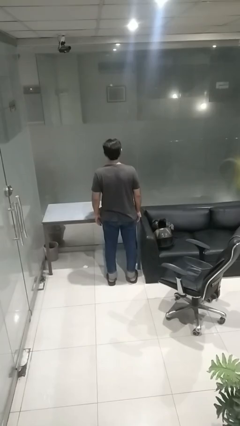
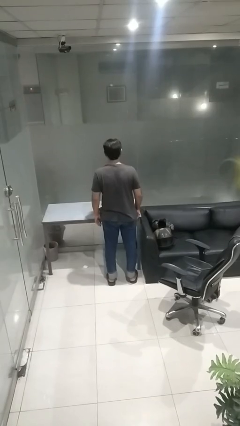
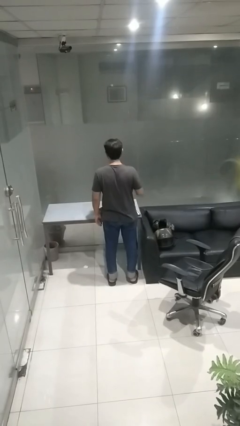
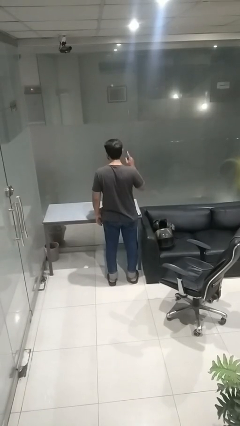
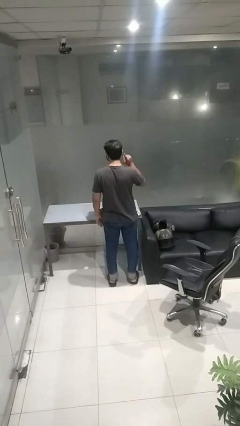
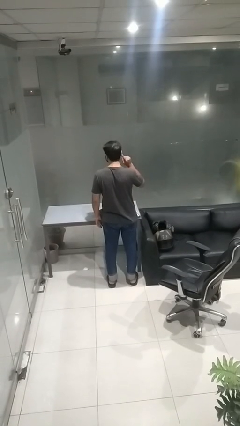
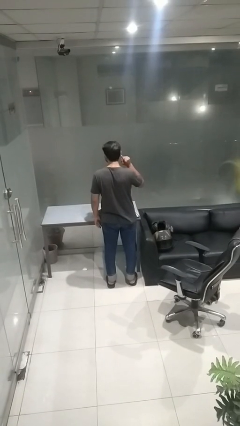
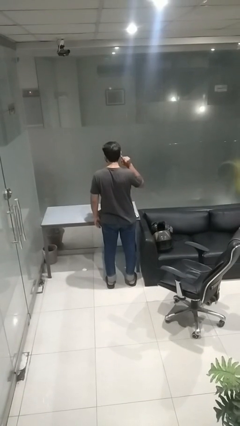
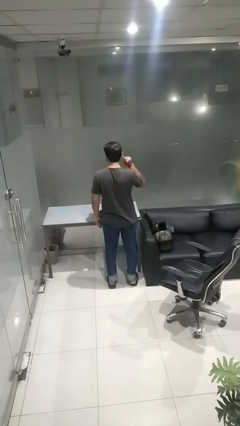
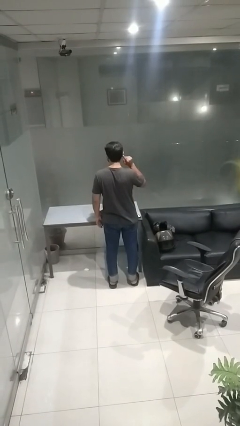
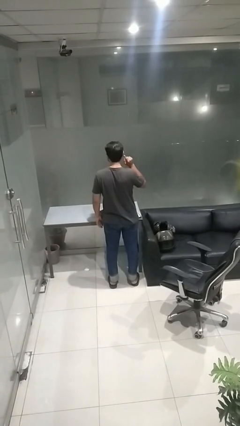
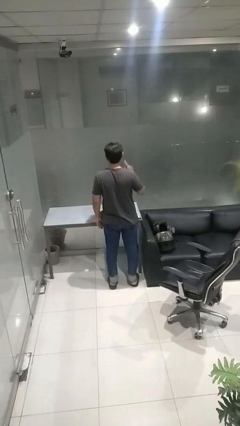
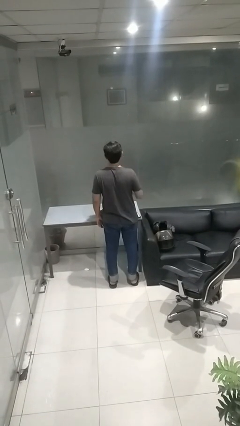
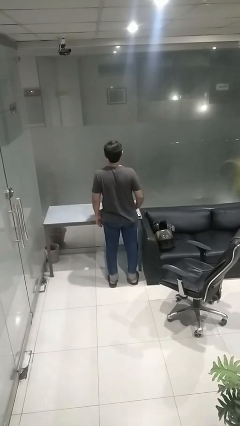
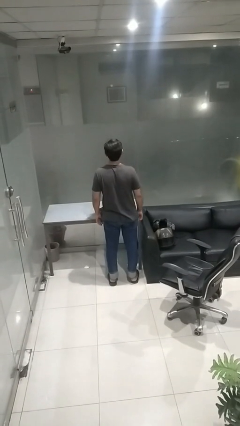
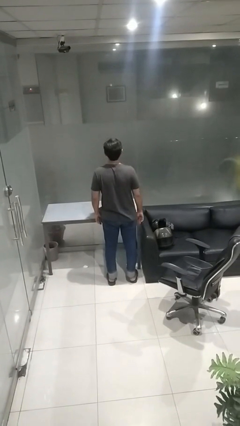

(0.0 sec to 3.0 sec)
person gestures listen closely

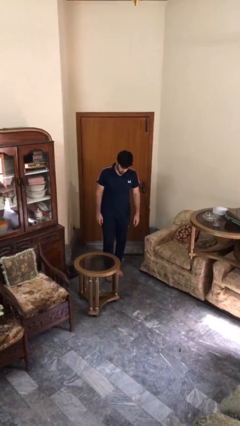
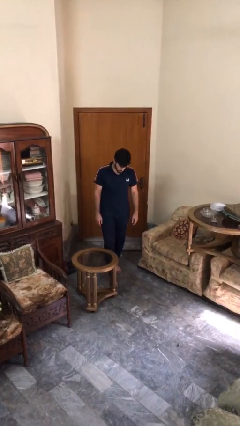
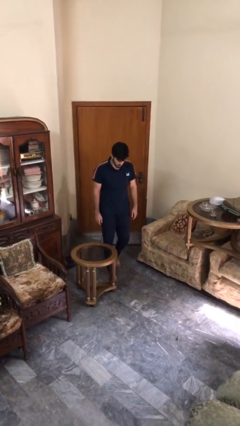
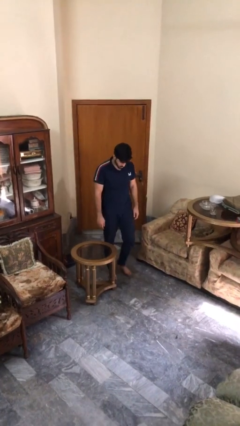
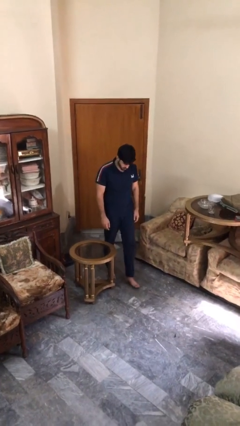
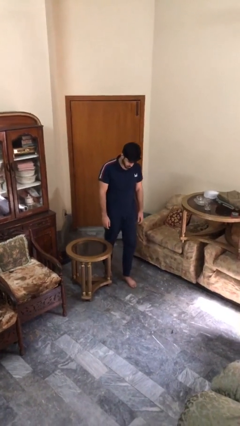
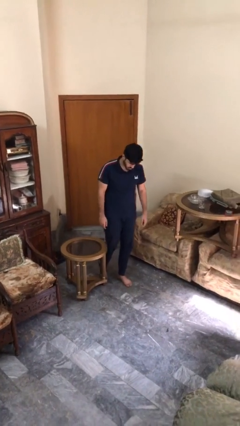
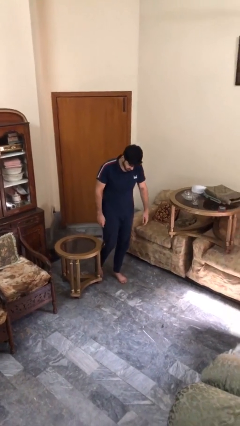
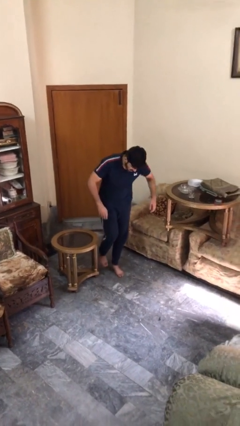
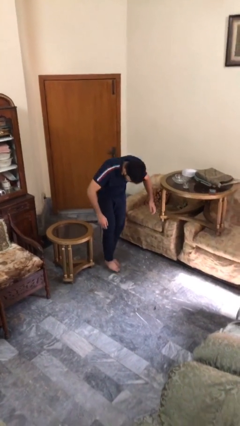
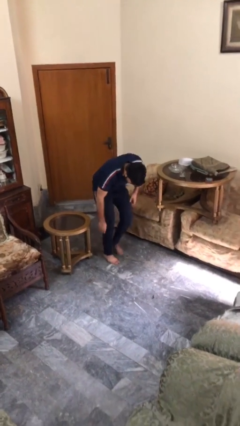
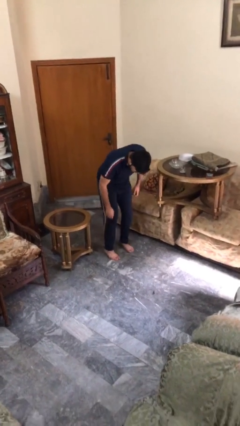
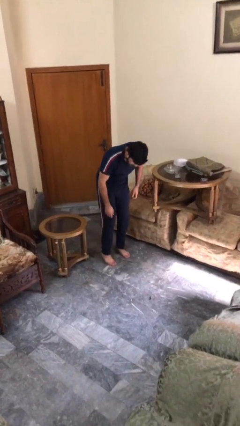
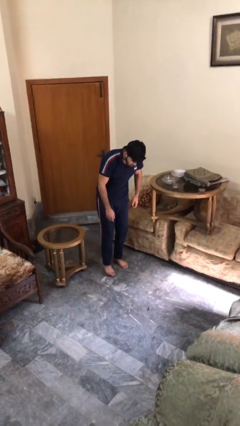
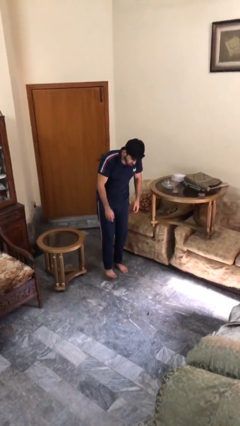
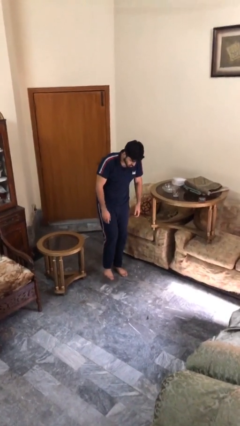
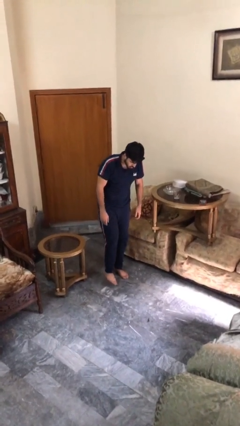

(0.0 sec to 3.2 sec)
person stubs toe

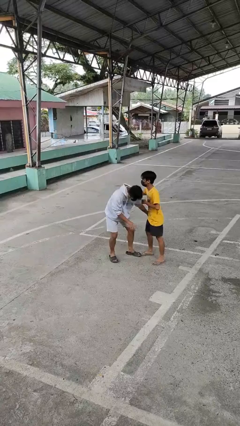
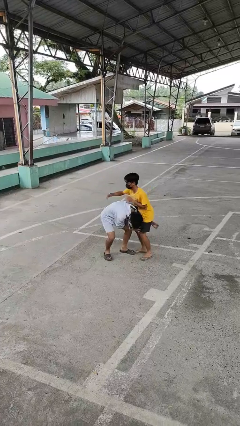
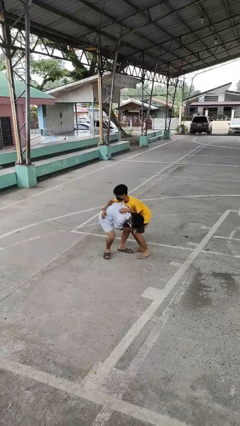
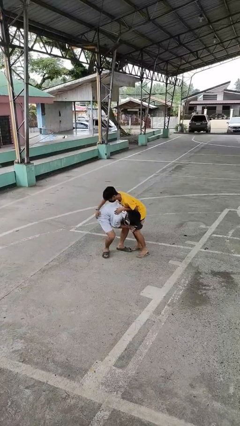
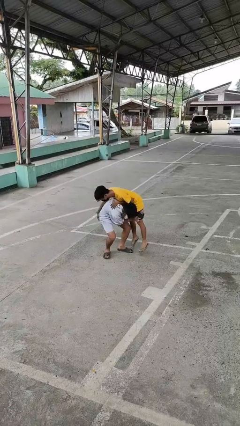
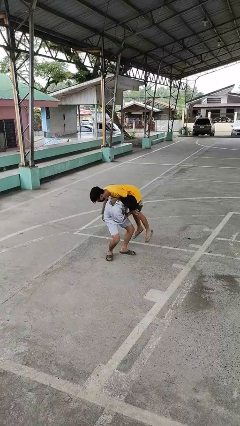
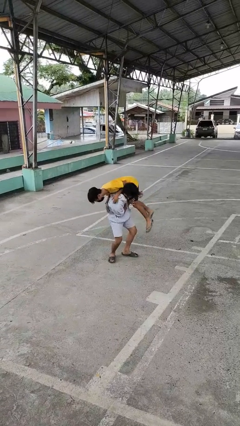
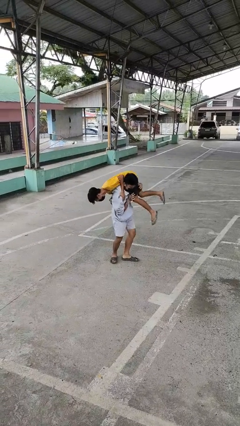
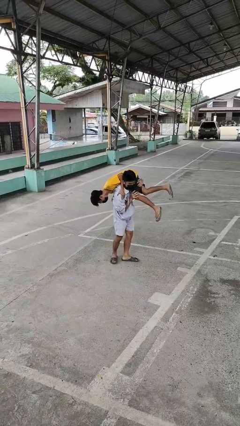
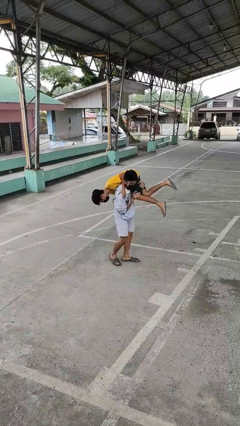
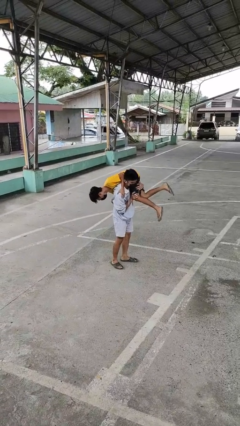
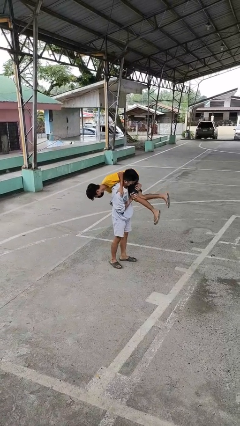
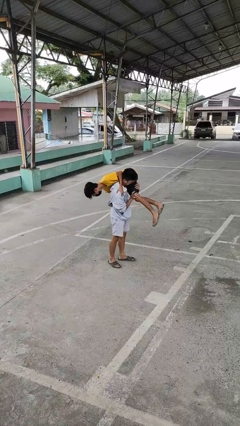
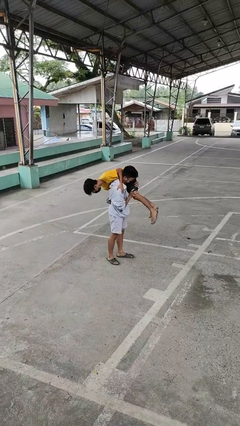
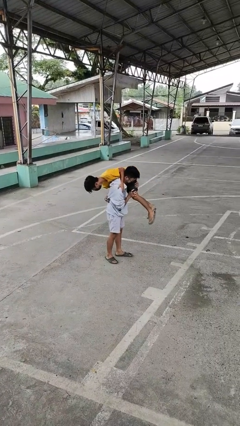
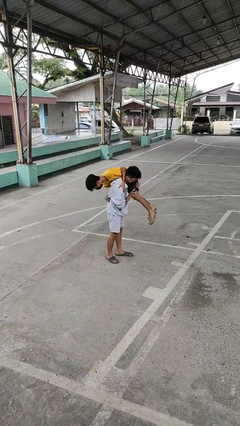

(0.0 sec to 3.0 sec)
person carries person over shoulder

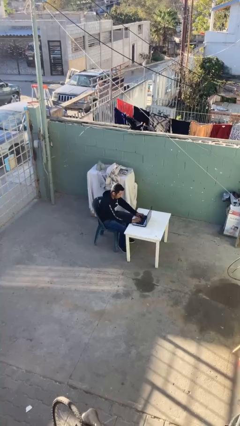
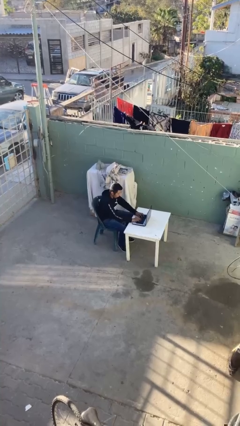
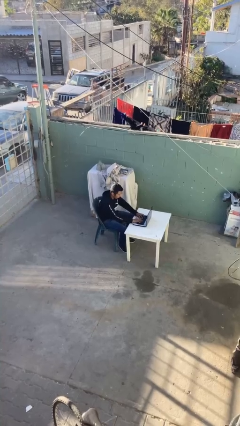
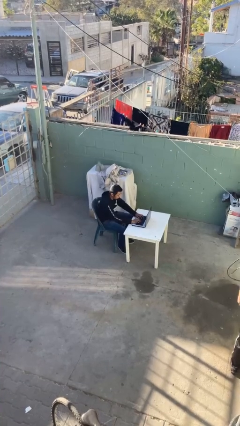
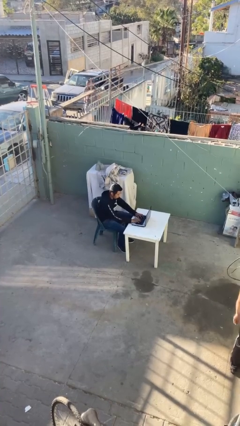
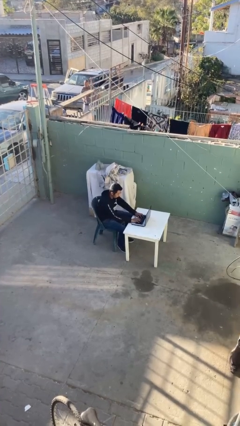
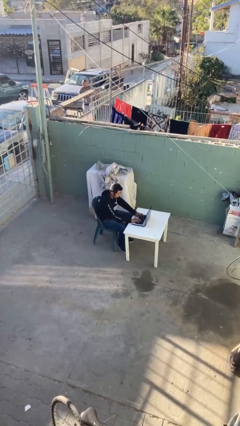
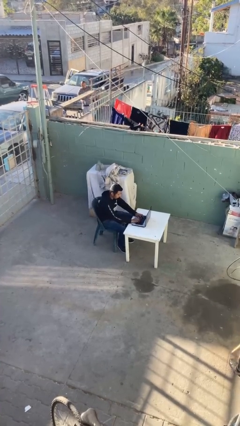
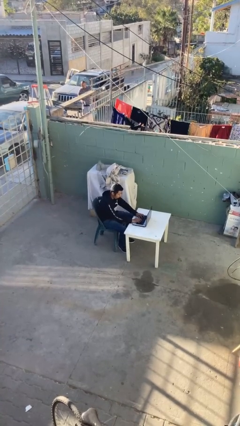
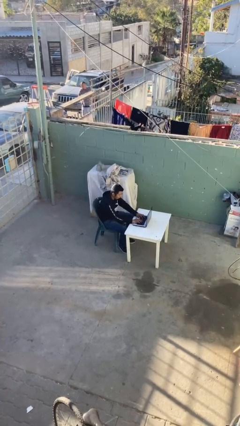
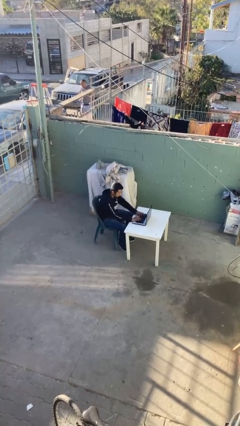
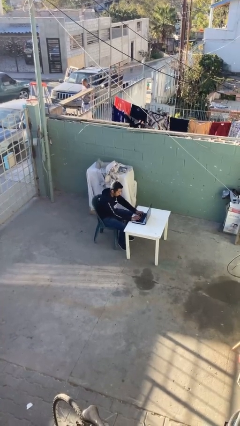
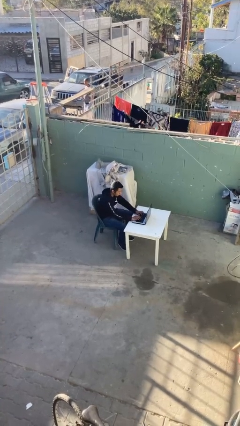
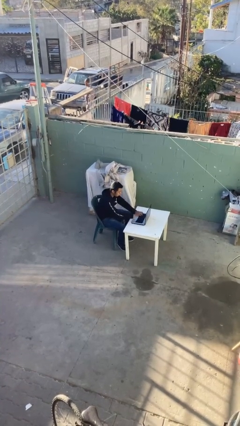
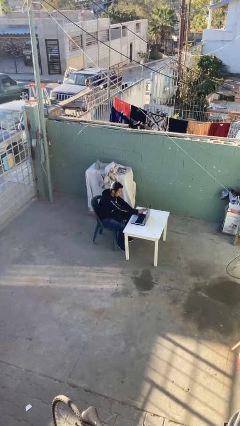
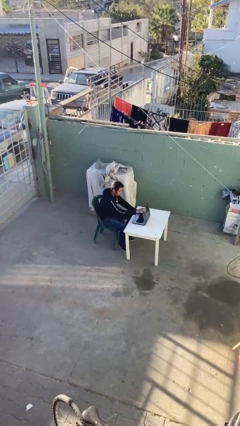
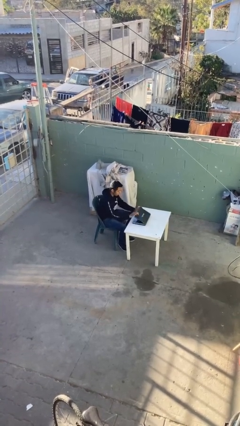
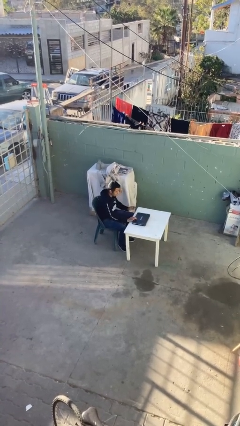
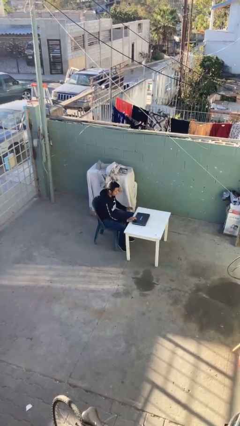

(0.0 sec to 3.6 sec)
person interacts with laptop

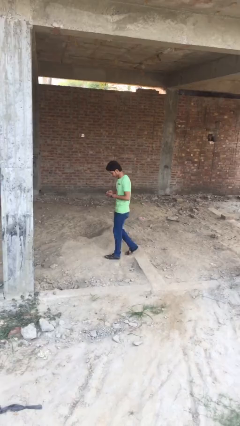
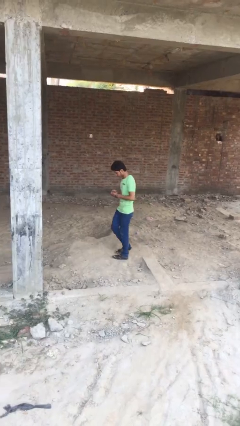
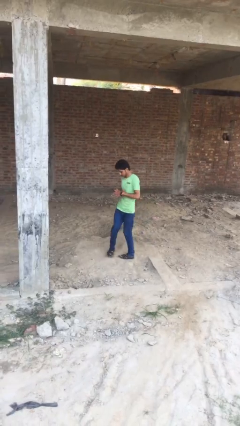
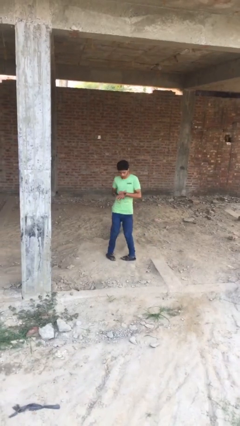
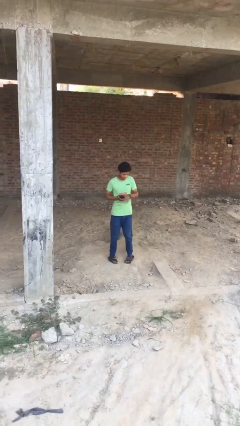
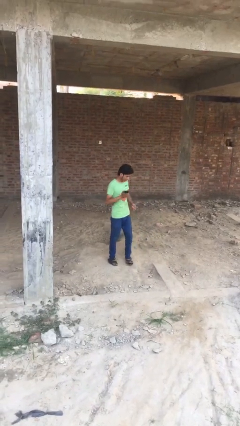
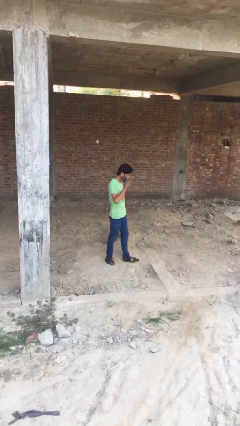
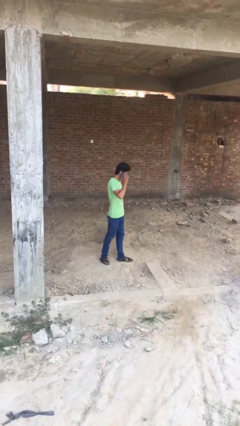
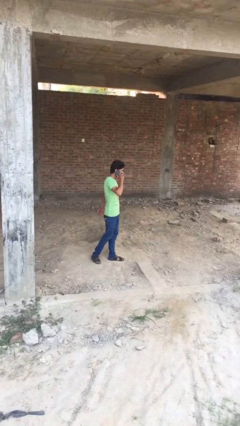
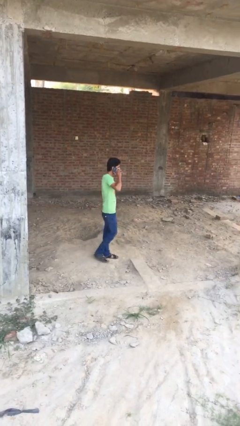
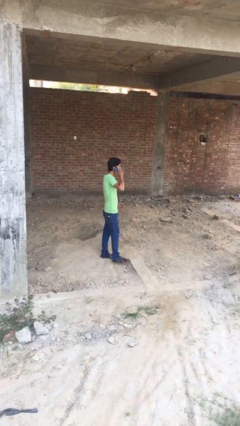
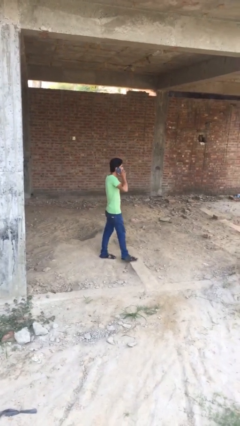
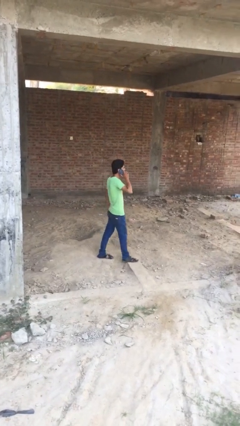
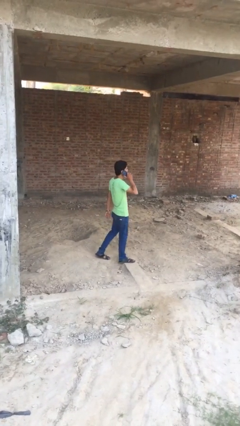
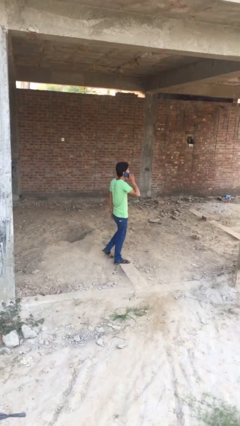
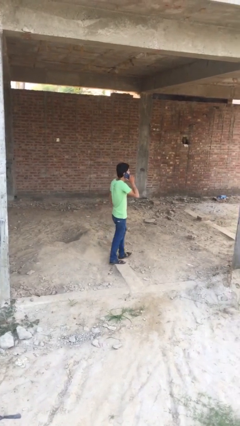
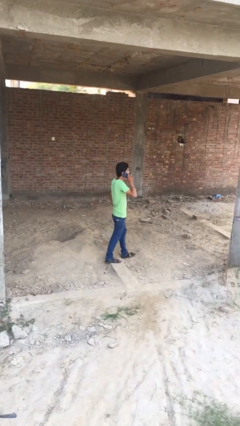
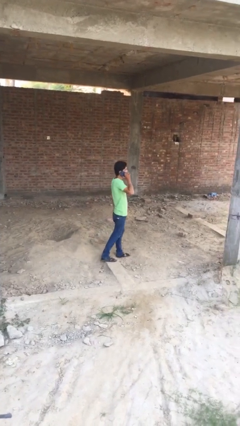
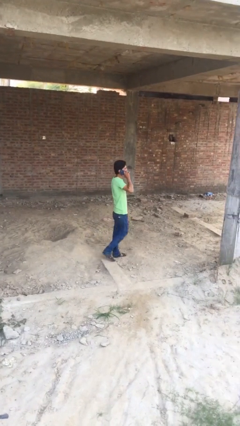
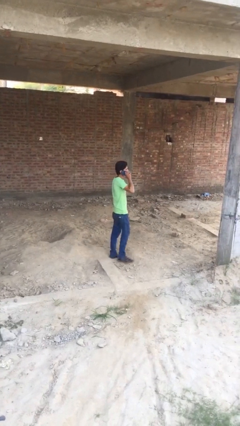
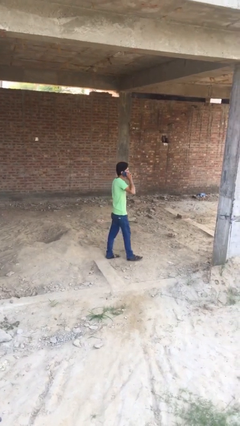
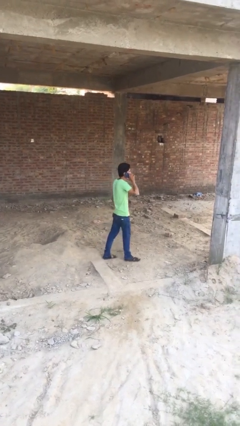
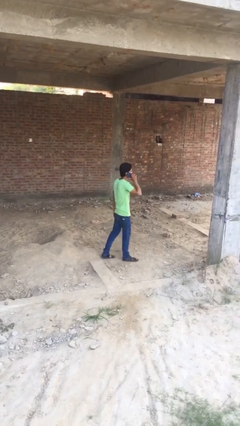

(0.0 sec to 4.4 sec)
person talks on phone

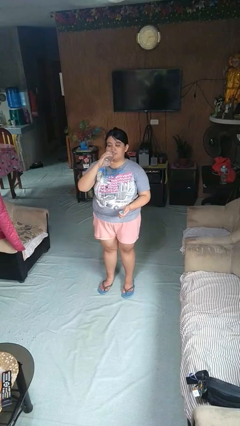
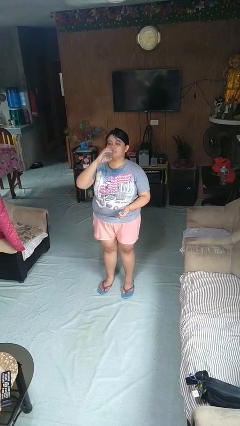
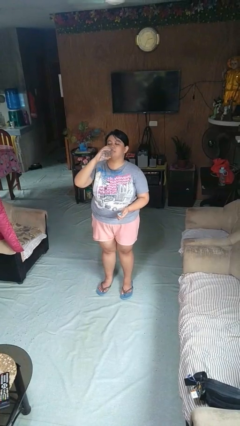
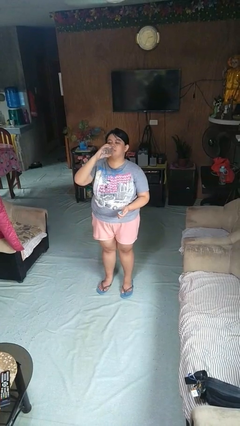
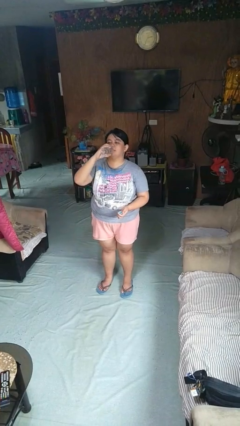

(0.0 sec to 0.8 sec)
person drinks from bottle
